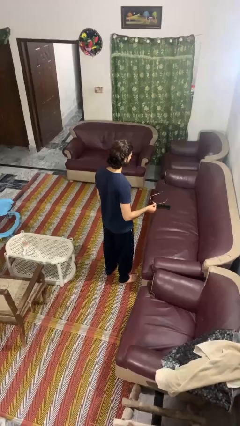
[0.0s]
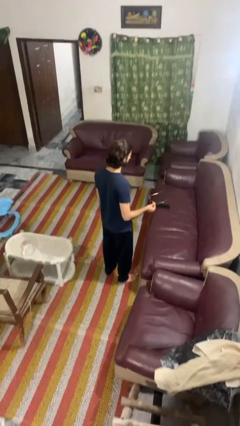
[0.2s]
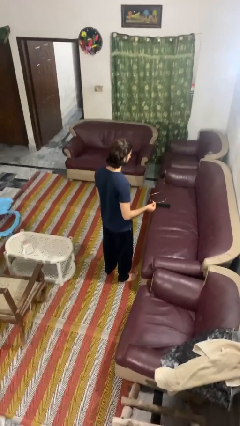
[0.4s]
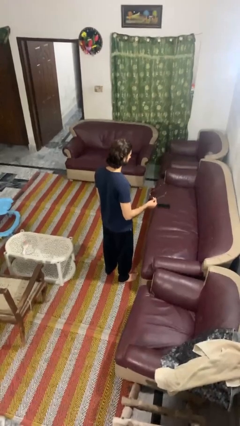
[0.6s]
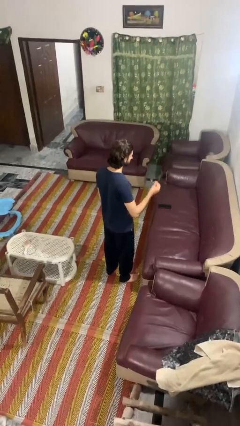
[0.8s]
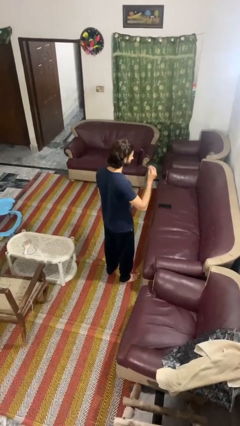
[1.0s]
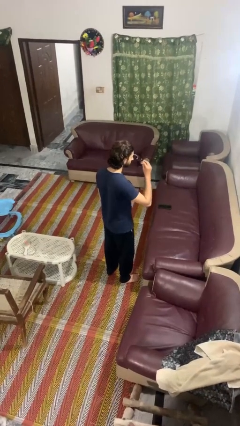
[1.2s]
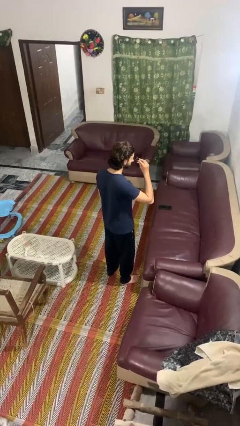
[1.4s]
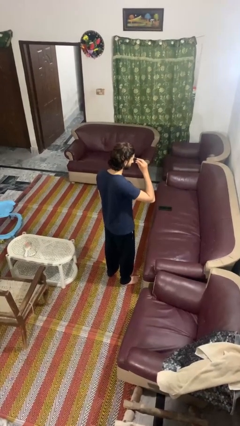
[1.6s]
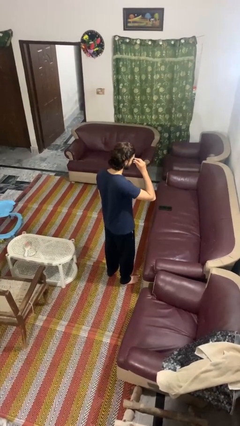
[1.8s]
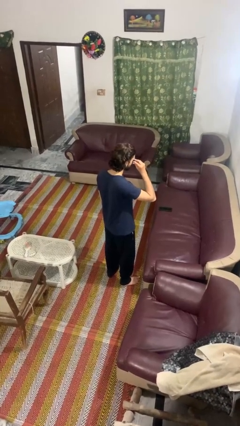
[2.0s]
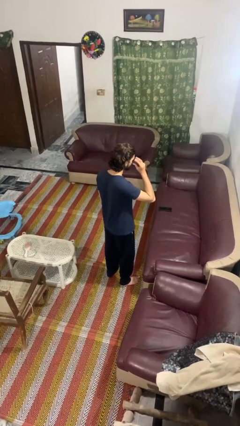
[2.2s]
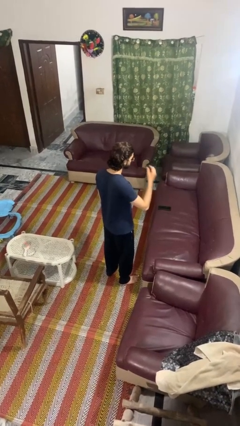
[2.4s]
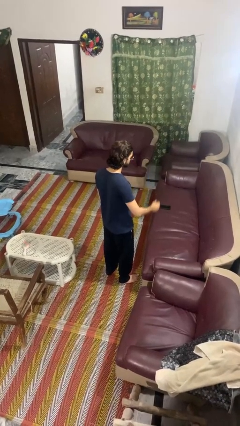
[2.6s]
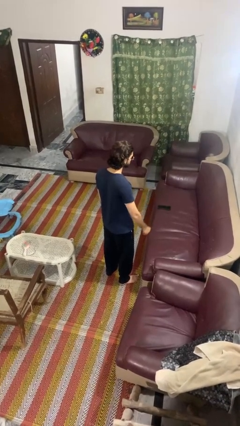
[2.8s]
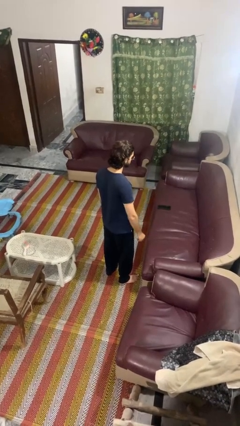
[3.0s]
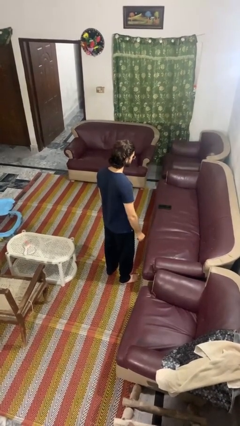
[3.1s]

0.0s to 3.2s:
person puts on sunglasses

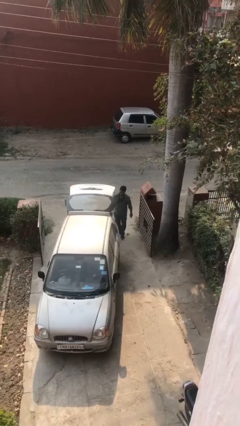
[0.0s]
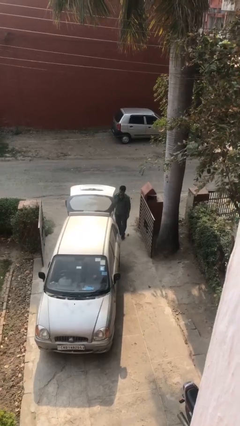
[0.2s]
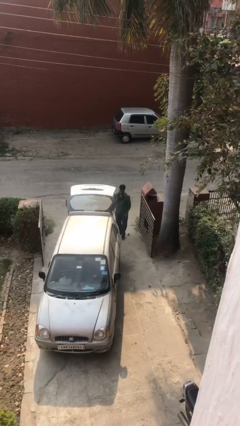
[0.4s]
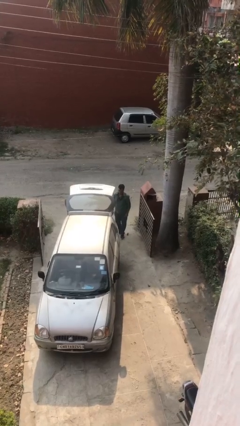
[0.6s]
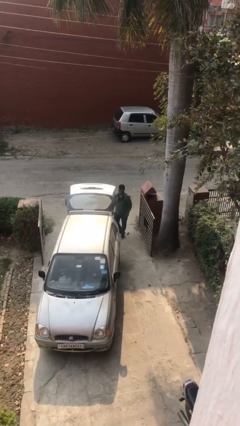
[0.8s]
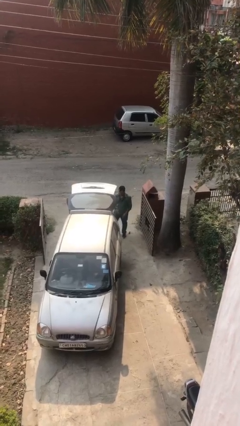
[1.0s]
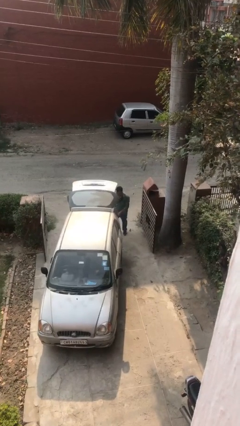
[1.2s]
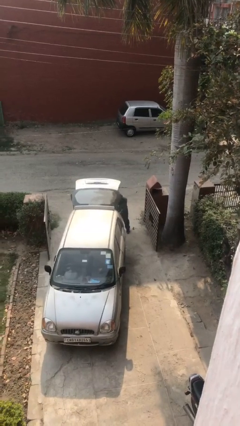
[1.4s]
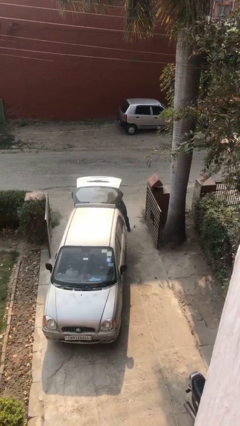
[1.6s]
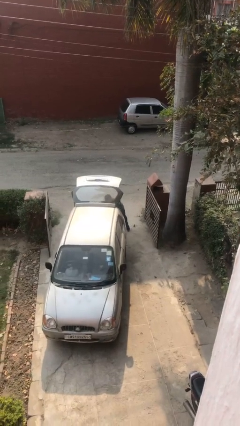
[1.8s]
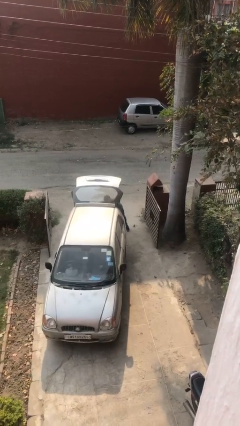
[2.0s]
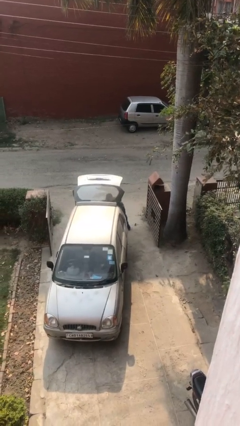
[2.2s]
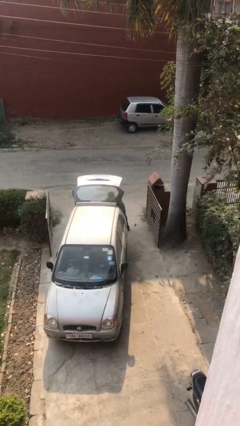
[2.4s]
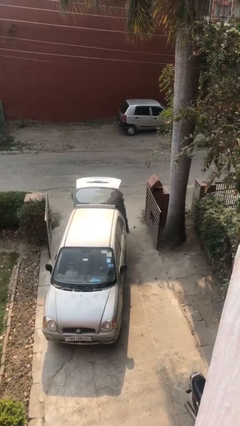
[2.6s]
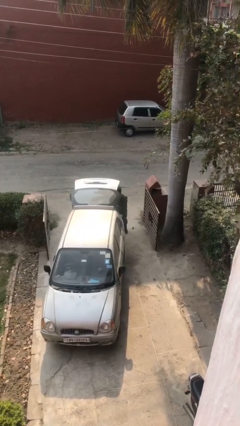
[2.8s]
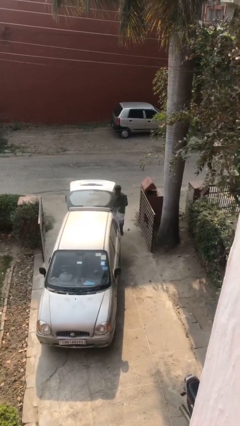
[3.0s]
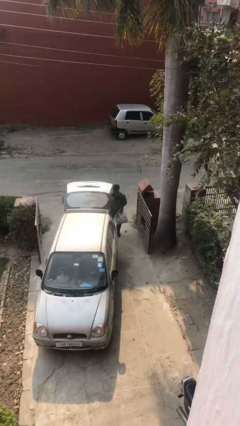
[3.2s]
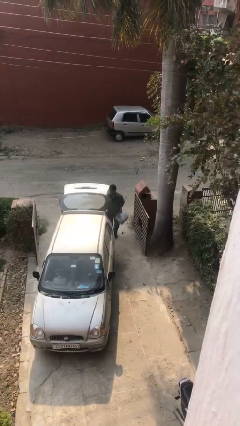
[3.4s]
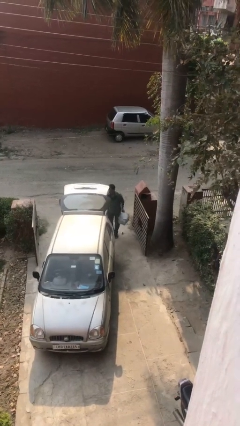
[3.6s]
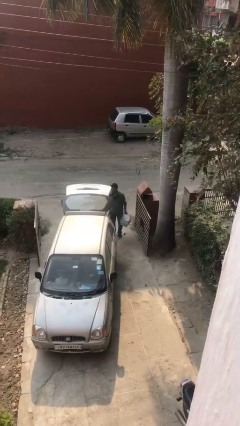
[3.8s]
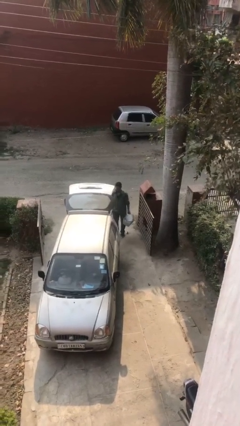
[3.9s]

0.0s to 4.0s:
person unloads car

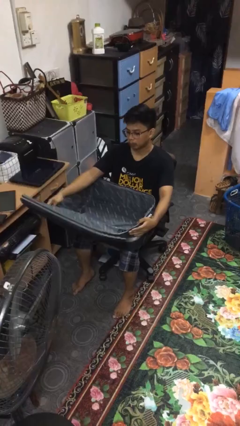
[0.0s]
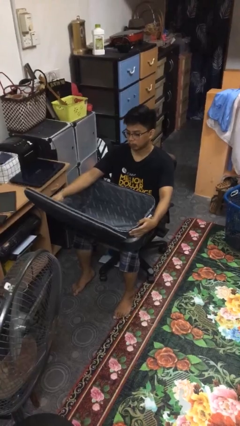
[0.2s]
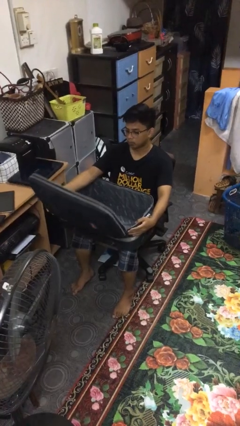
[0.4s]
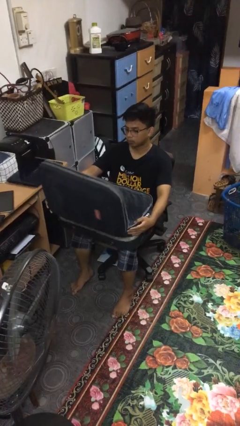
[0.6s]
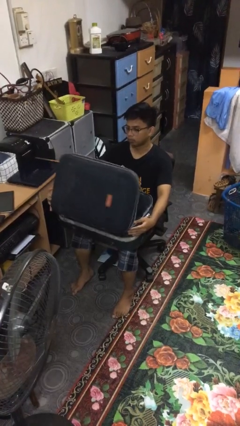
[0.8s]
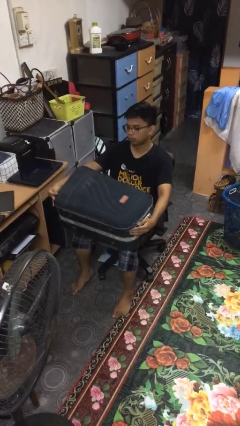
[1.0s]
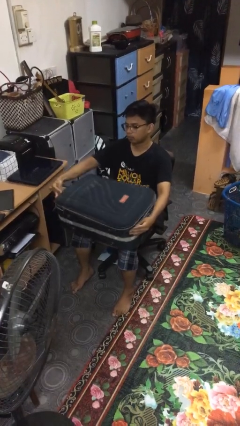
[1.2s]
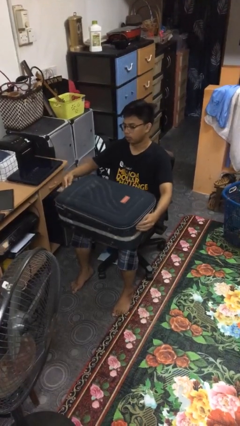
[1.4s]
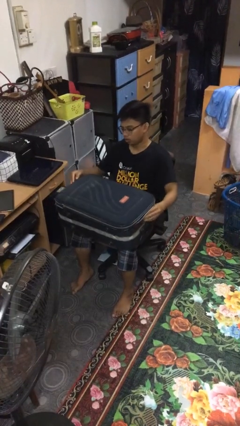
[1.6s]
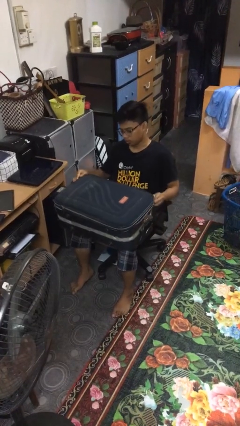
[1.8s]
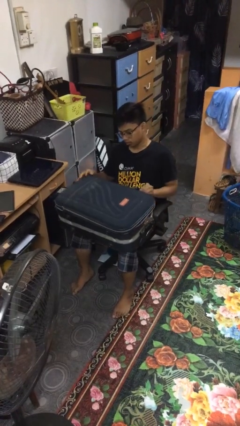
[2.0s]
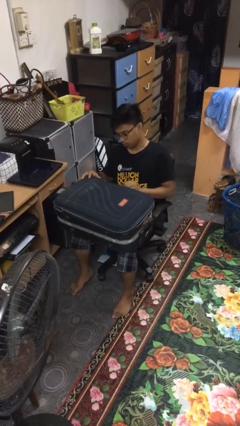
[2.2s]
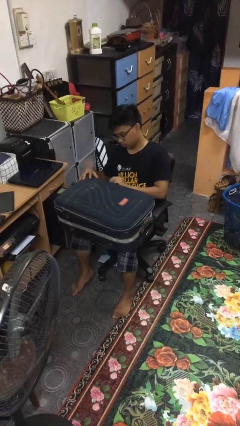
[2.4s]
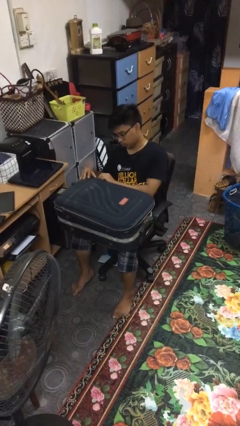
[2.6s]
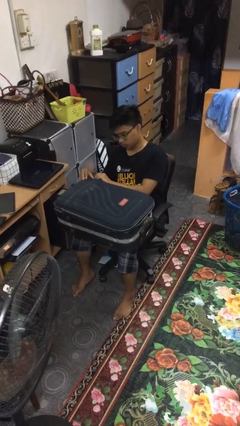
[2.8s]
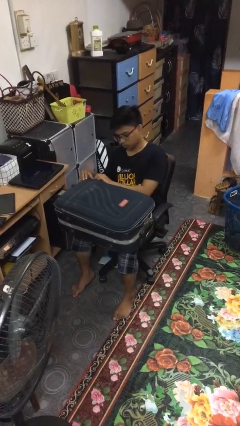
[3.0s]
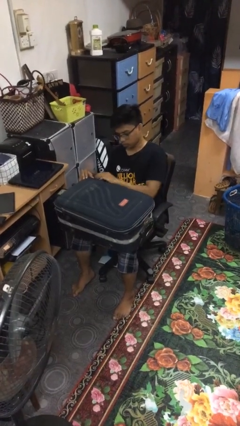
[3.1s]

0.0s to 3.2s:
person closes suitcase

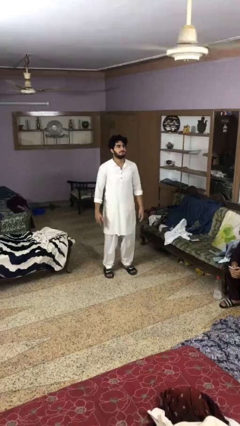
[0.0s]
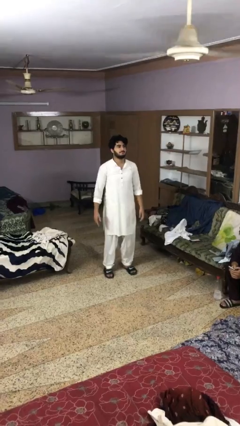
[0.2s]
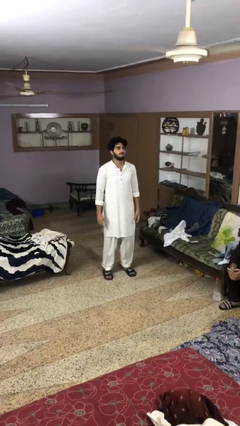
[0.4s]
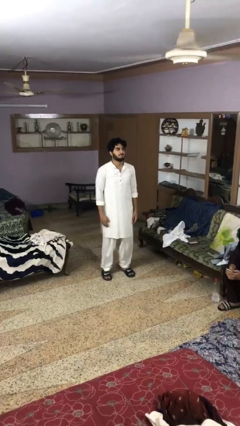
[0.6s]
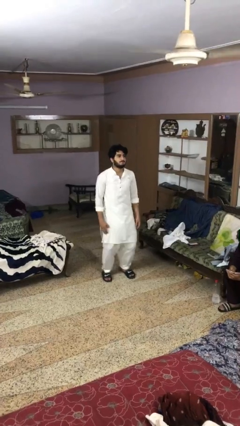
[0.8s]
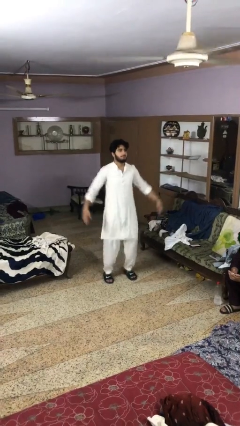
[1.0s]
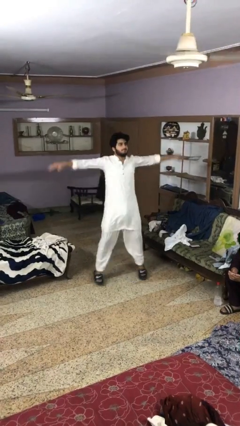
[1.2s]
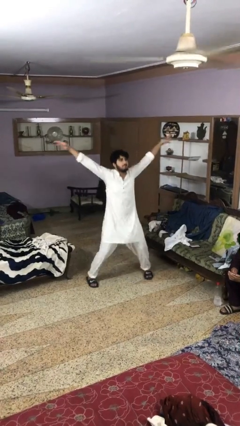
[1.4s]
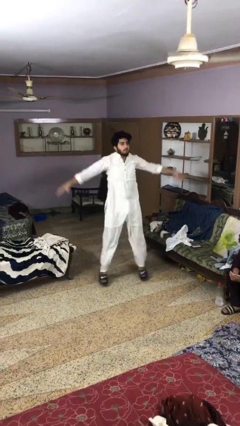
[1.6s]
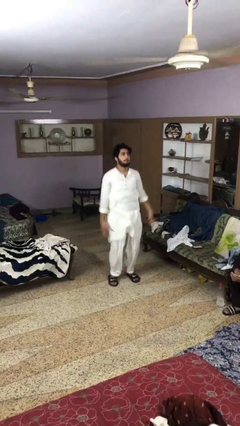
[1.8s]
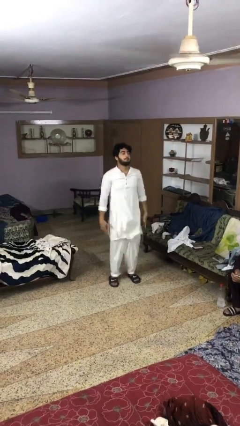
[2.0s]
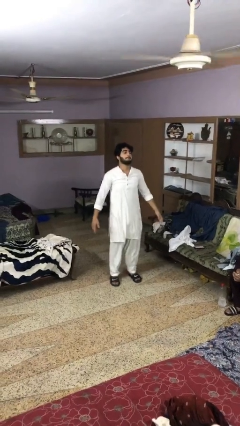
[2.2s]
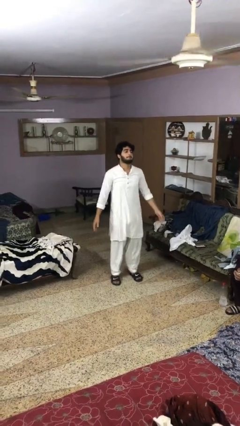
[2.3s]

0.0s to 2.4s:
person exercises with jumping jacks

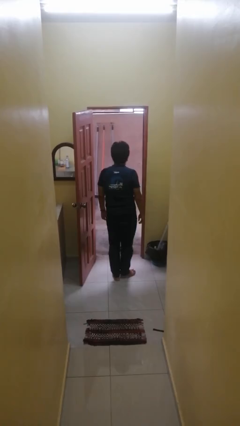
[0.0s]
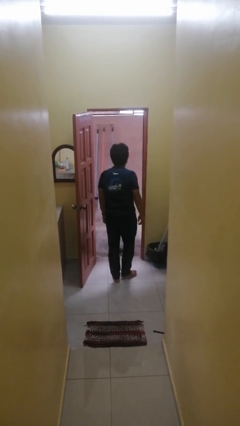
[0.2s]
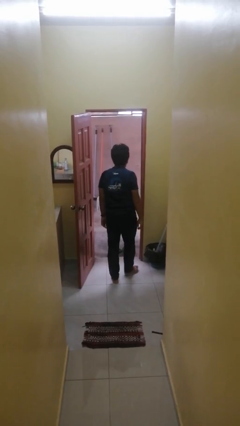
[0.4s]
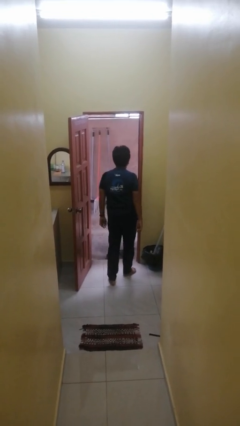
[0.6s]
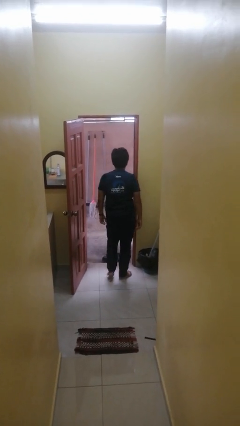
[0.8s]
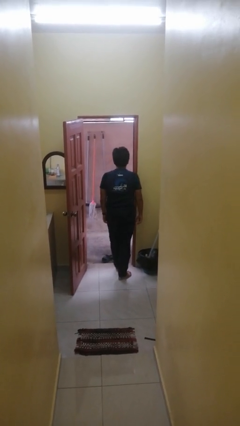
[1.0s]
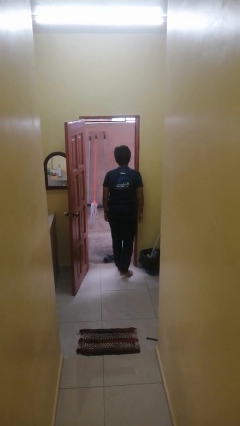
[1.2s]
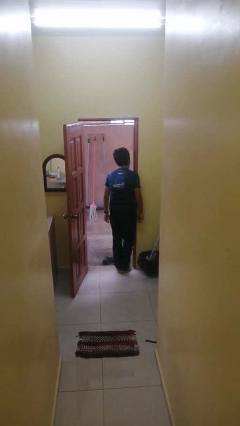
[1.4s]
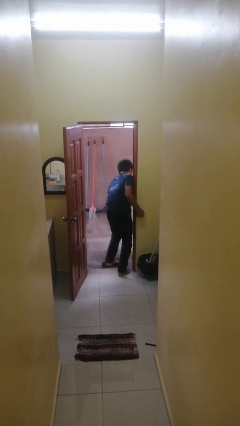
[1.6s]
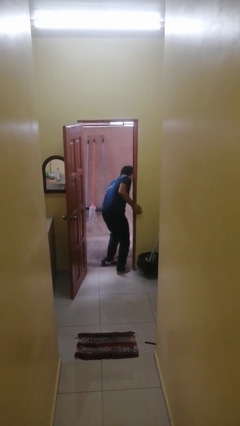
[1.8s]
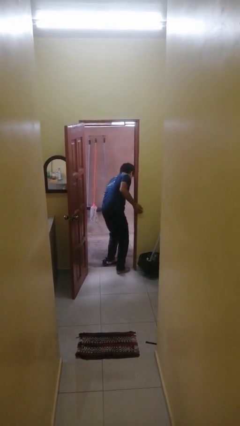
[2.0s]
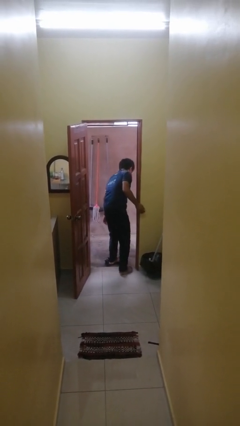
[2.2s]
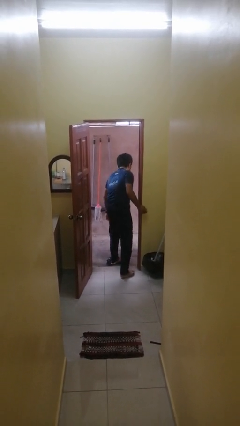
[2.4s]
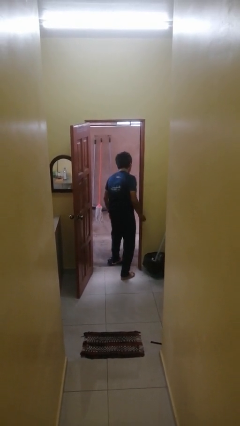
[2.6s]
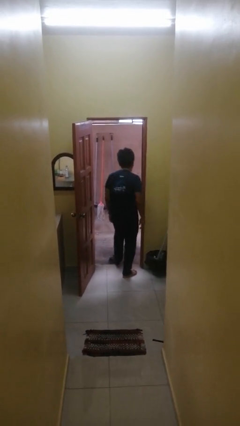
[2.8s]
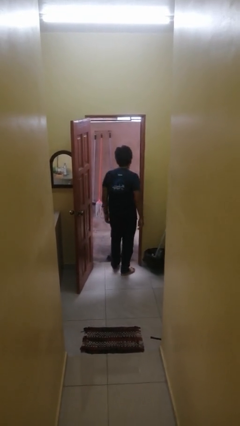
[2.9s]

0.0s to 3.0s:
person bumps into wall

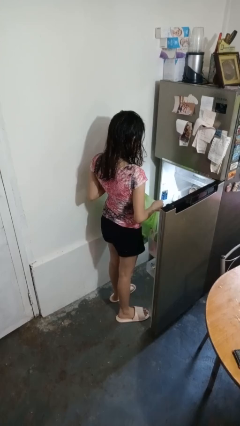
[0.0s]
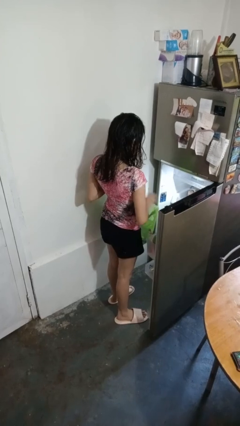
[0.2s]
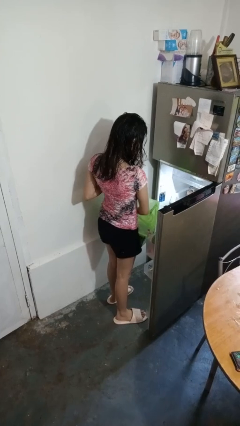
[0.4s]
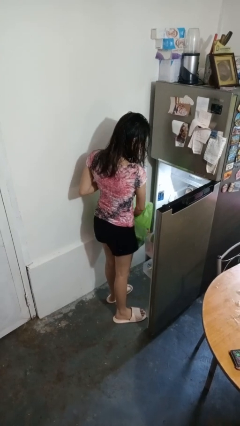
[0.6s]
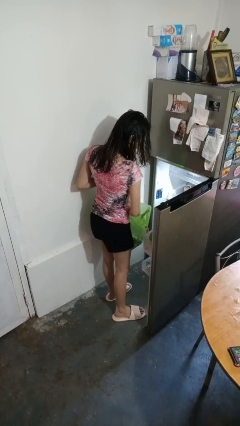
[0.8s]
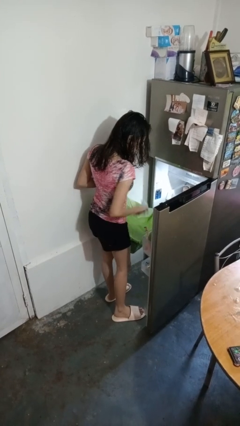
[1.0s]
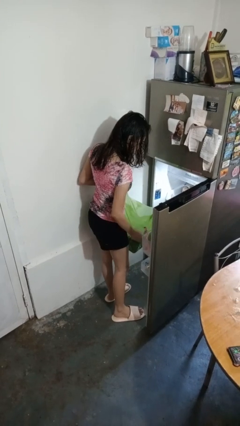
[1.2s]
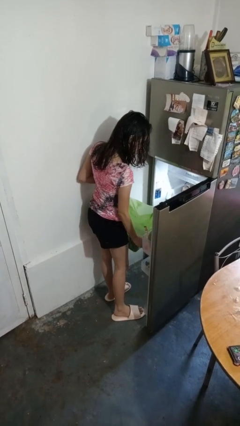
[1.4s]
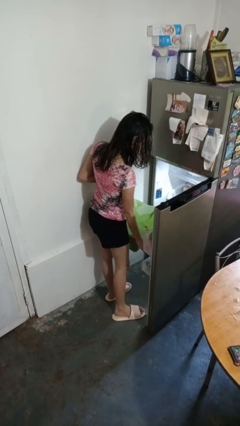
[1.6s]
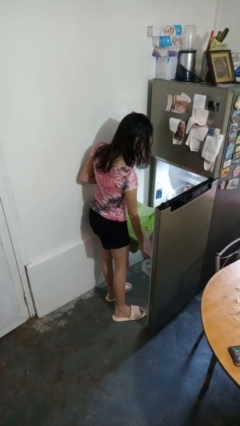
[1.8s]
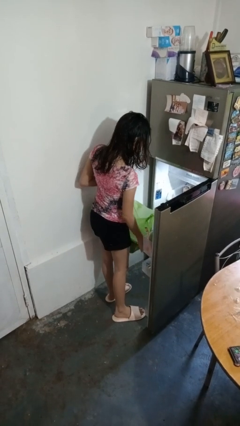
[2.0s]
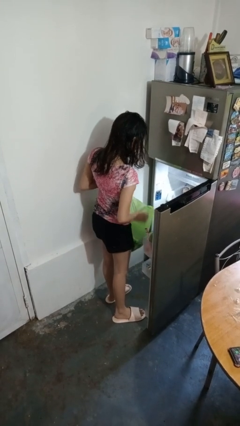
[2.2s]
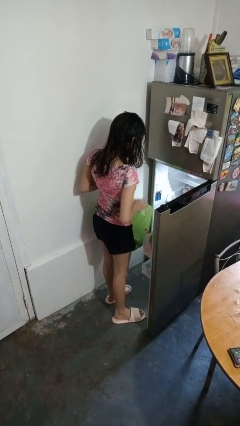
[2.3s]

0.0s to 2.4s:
person loads groceries into refrigerator
